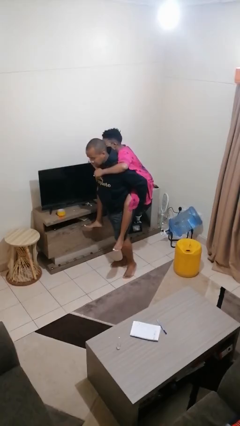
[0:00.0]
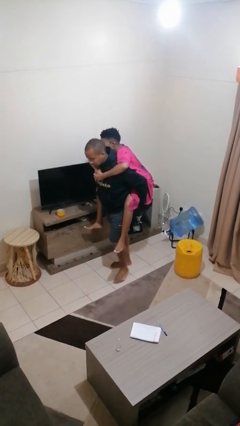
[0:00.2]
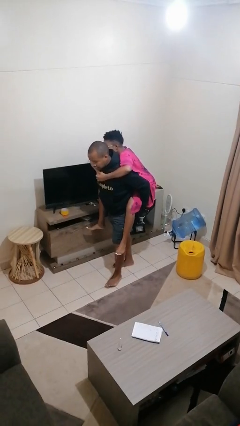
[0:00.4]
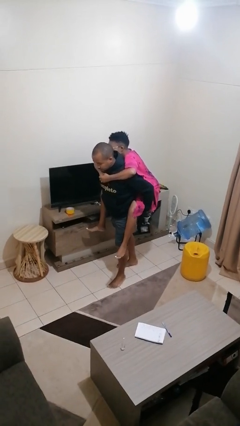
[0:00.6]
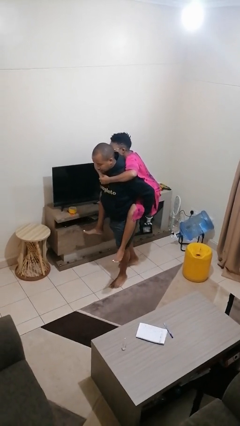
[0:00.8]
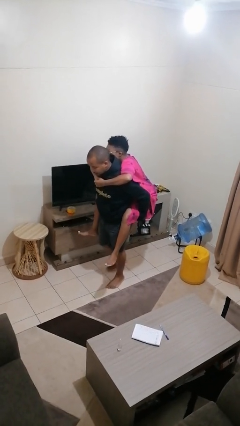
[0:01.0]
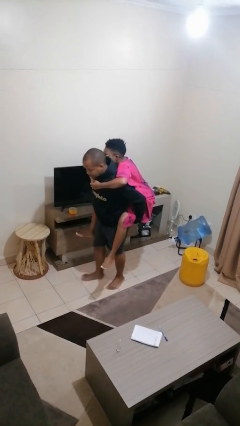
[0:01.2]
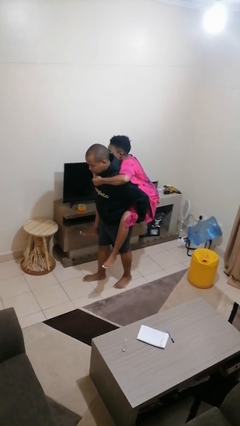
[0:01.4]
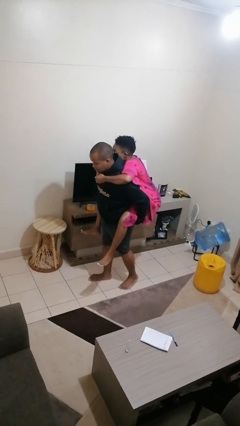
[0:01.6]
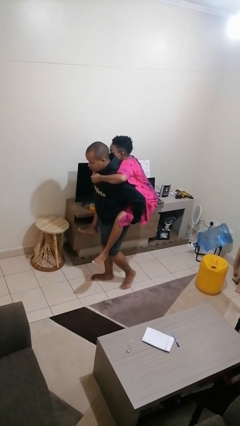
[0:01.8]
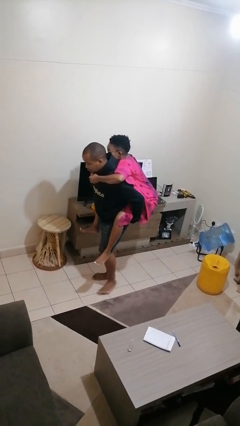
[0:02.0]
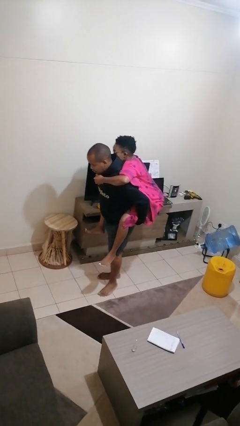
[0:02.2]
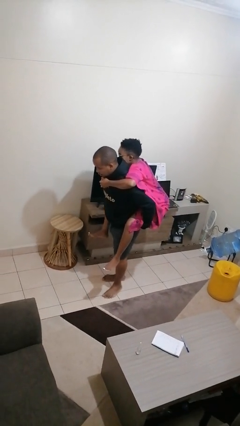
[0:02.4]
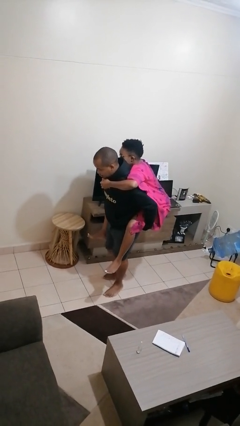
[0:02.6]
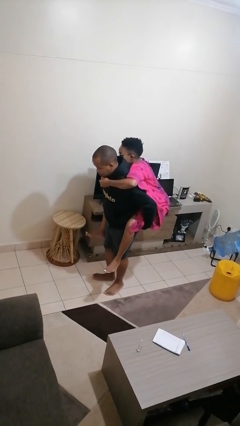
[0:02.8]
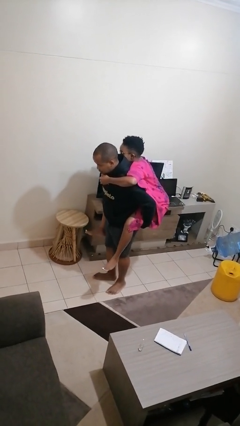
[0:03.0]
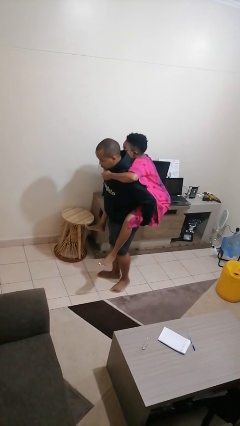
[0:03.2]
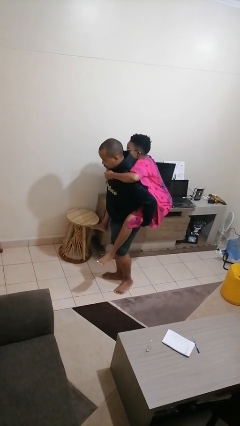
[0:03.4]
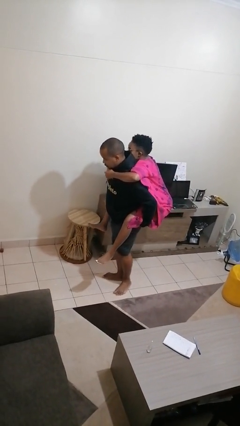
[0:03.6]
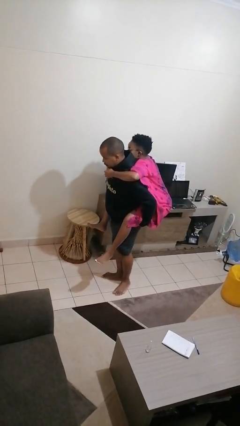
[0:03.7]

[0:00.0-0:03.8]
person carries person on back

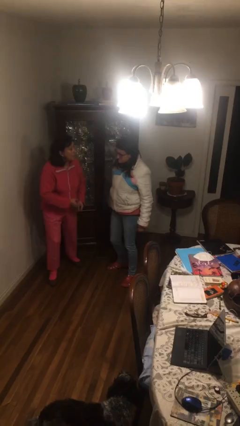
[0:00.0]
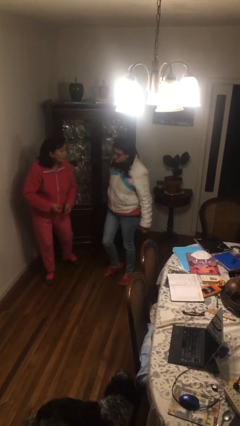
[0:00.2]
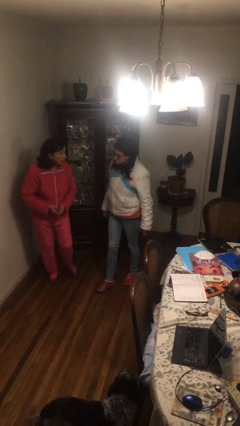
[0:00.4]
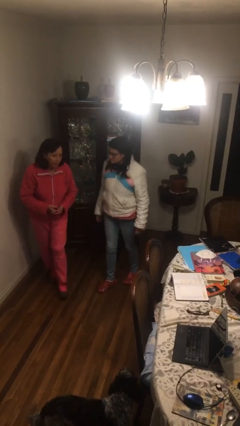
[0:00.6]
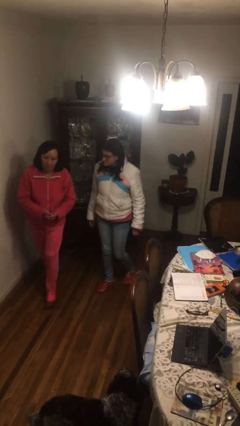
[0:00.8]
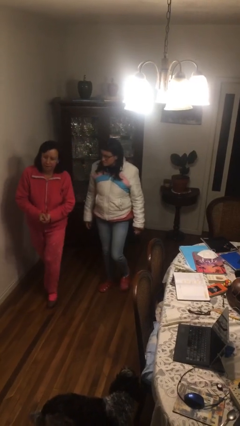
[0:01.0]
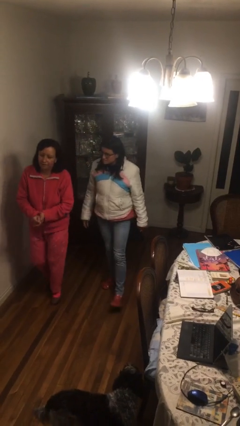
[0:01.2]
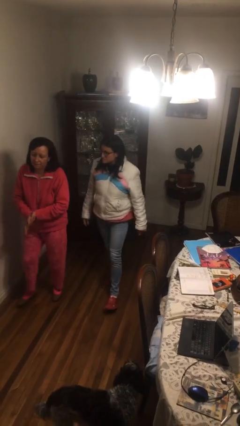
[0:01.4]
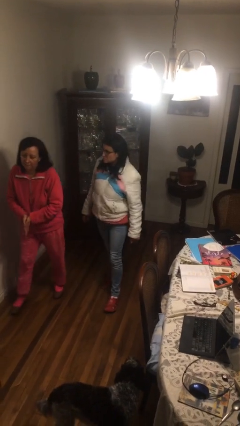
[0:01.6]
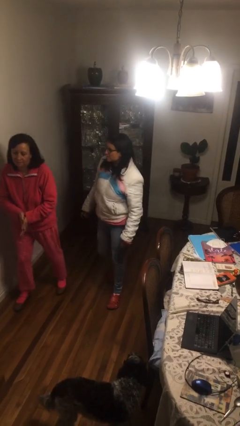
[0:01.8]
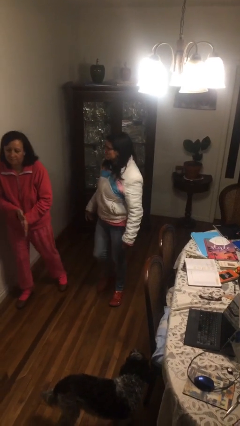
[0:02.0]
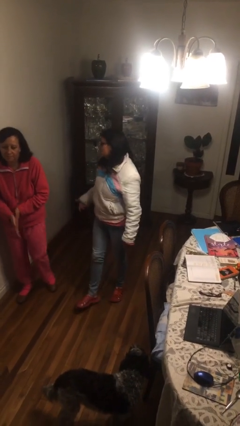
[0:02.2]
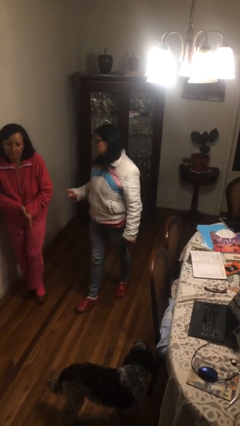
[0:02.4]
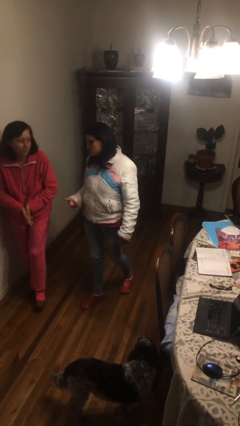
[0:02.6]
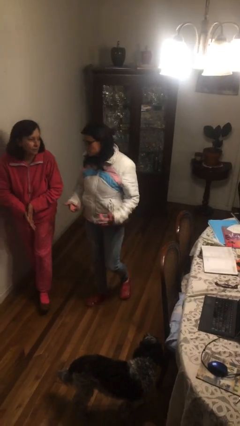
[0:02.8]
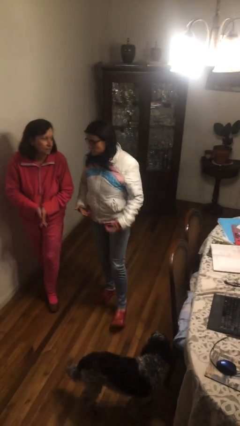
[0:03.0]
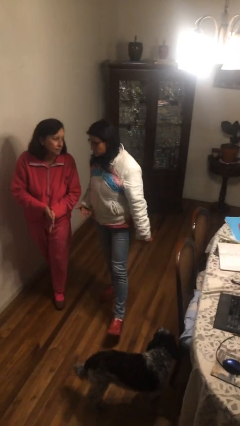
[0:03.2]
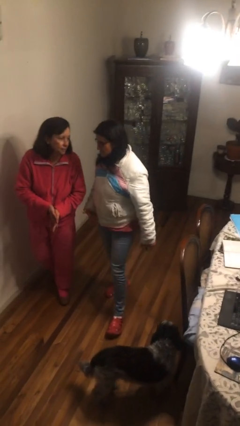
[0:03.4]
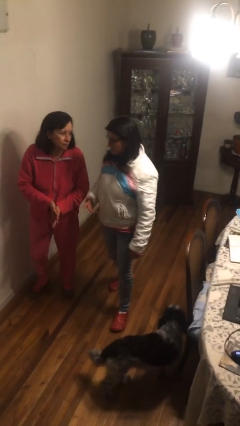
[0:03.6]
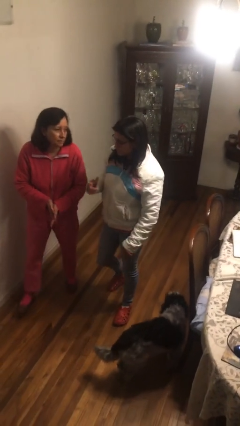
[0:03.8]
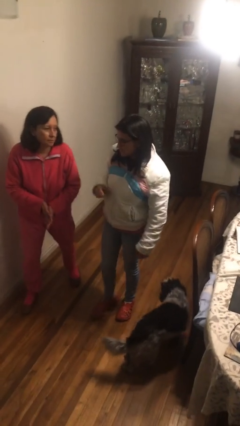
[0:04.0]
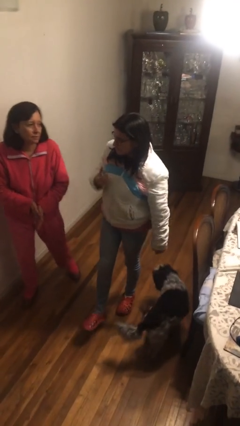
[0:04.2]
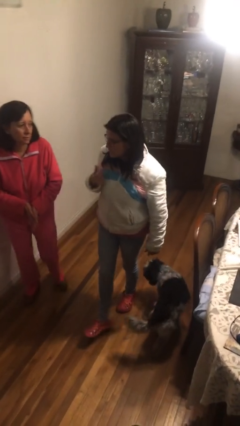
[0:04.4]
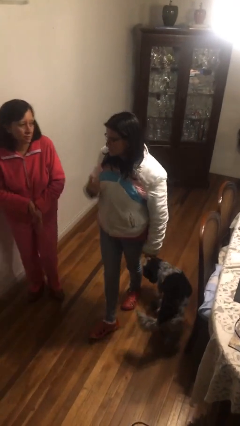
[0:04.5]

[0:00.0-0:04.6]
person talks to person

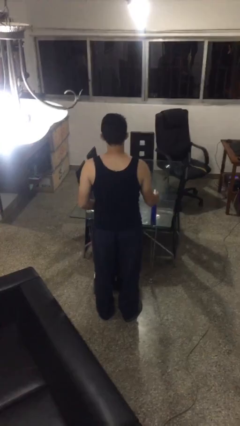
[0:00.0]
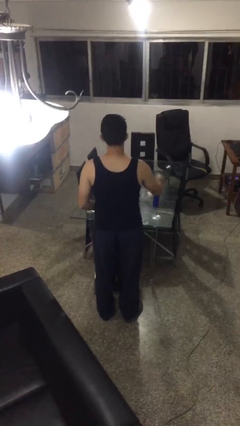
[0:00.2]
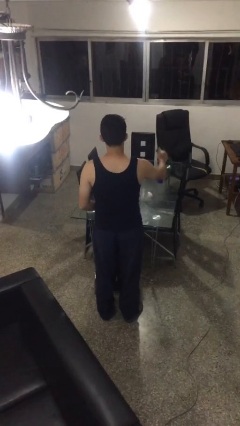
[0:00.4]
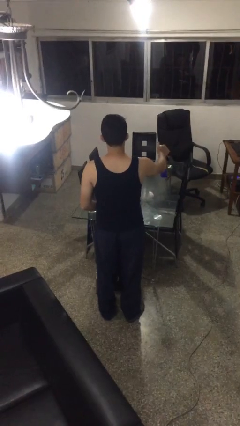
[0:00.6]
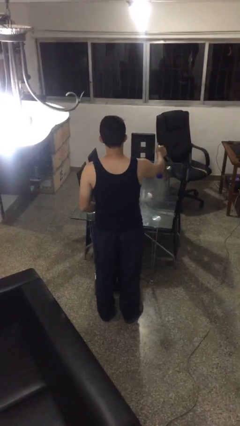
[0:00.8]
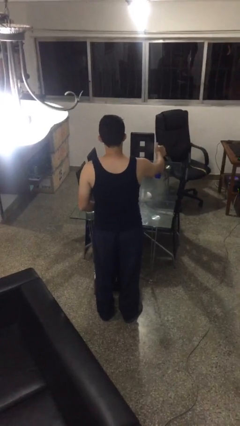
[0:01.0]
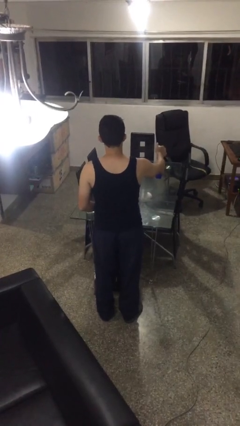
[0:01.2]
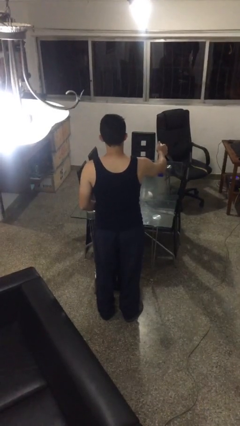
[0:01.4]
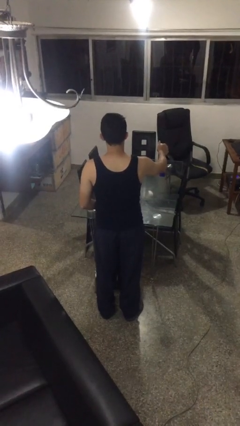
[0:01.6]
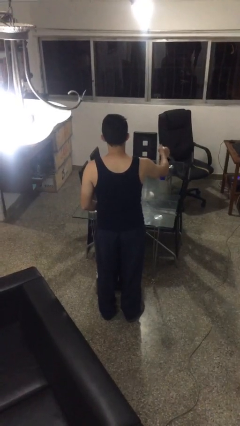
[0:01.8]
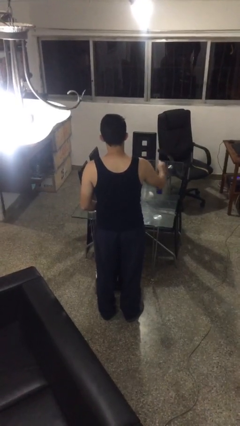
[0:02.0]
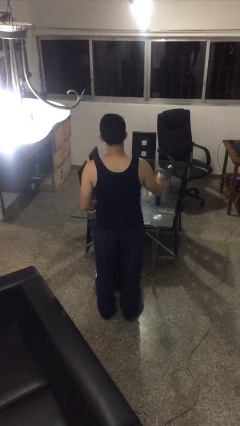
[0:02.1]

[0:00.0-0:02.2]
person sprays from bottle

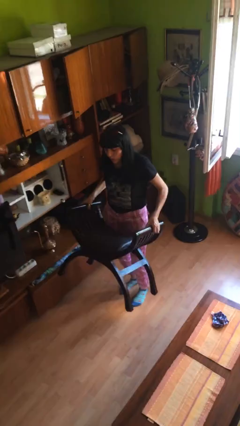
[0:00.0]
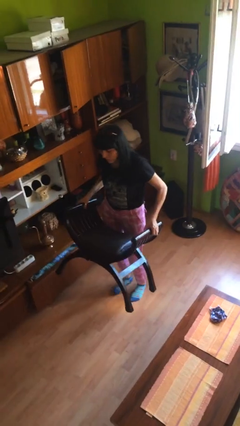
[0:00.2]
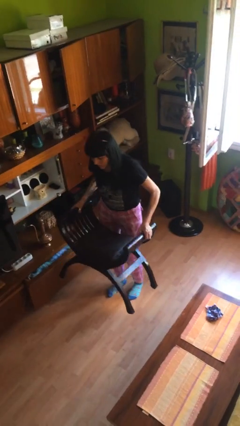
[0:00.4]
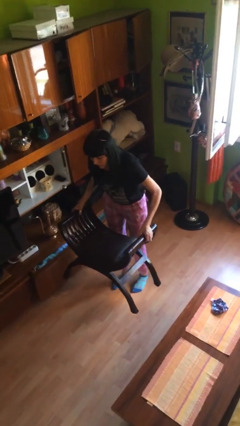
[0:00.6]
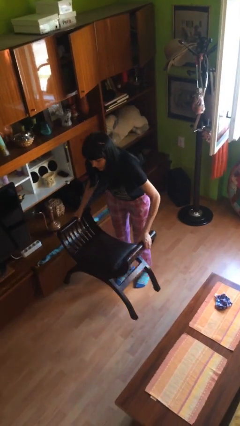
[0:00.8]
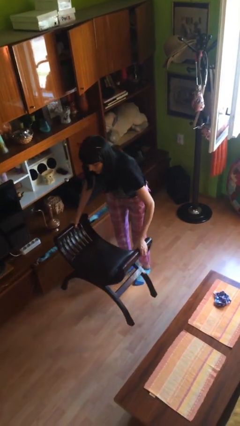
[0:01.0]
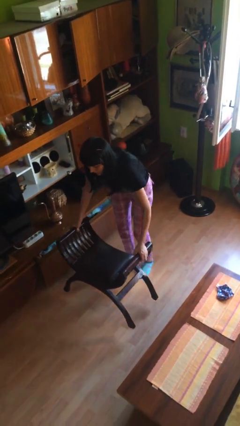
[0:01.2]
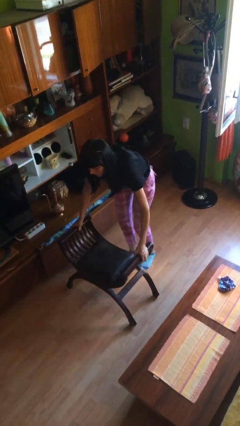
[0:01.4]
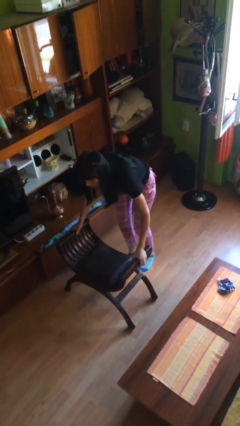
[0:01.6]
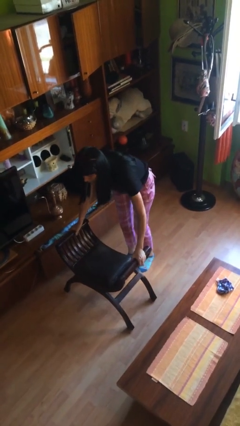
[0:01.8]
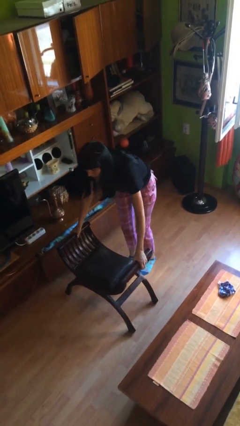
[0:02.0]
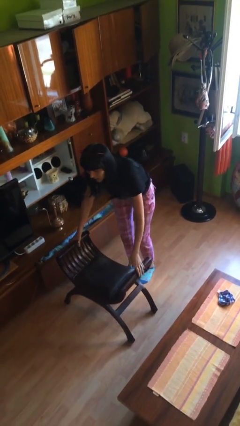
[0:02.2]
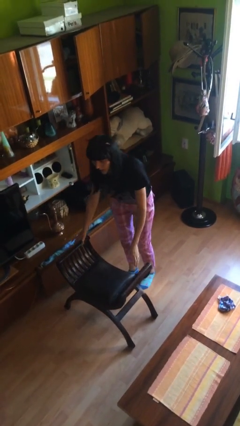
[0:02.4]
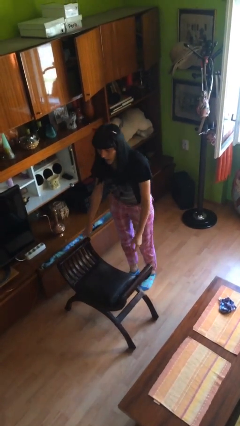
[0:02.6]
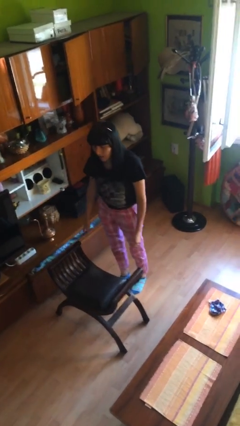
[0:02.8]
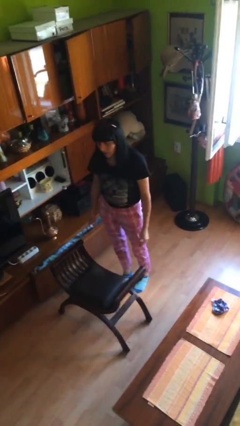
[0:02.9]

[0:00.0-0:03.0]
person puts down object on floor

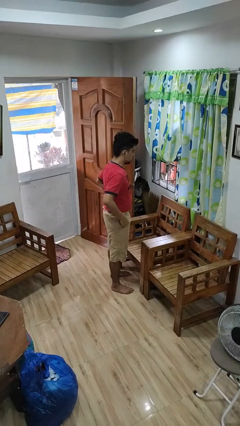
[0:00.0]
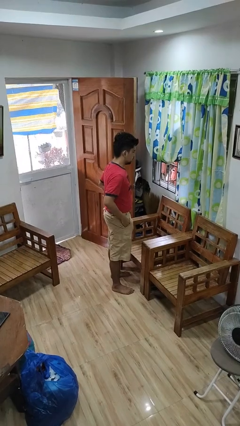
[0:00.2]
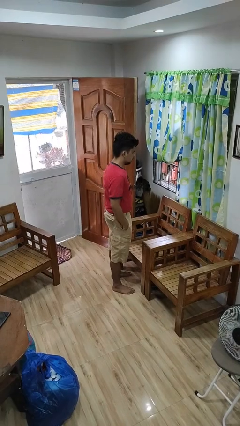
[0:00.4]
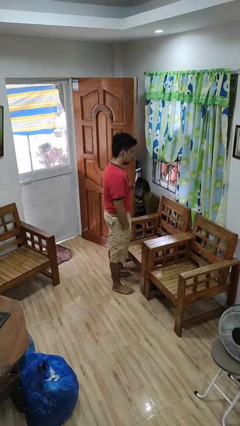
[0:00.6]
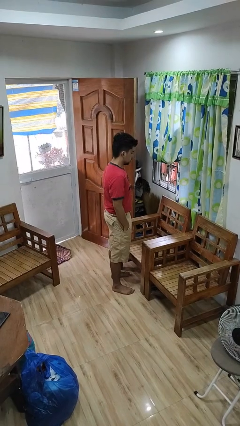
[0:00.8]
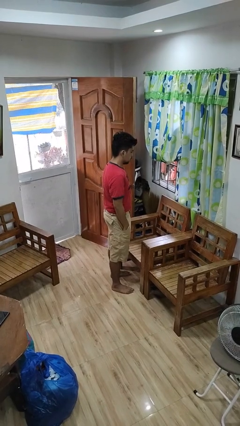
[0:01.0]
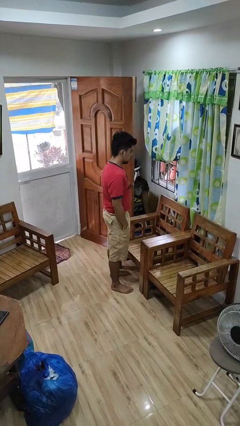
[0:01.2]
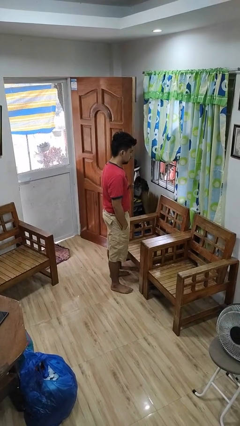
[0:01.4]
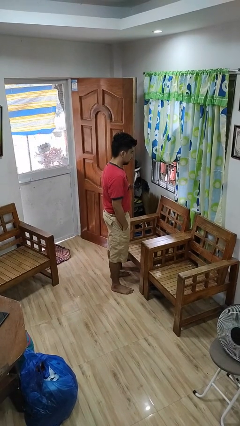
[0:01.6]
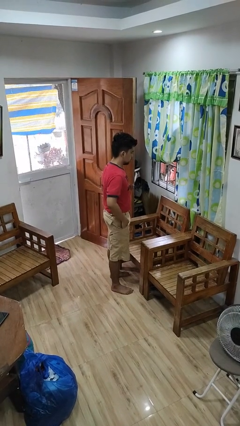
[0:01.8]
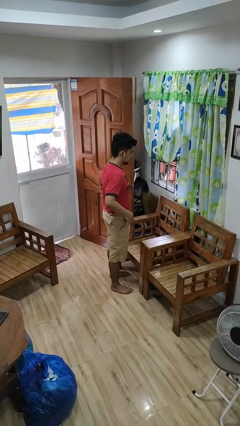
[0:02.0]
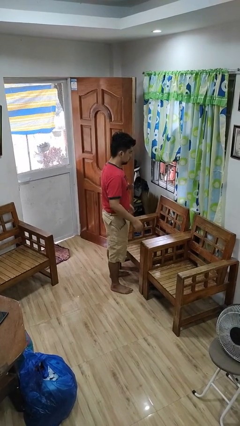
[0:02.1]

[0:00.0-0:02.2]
person puts hands in back pockets

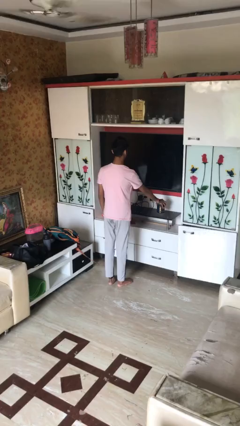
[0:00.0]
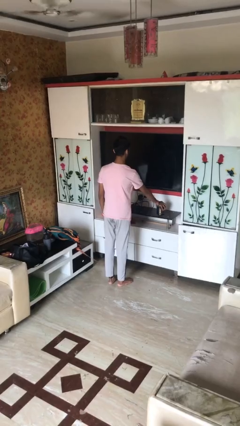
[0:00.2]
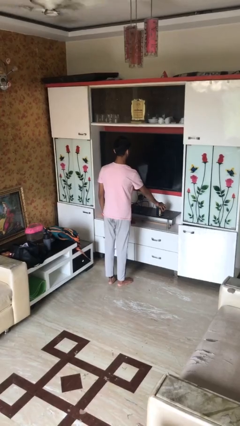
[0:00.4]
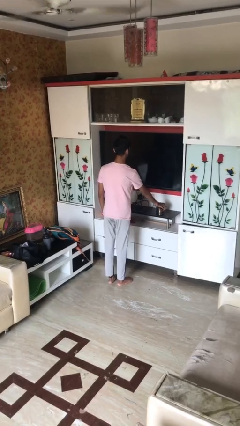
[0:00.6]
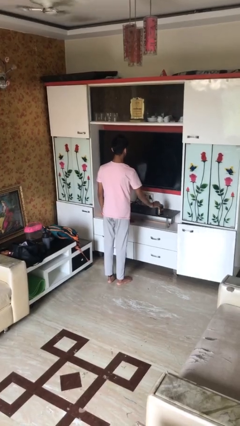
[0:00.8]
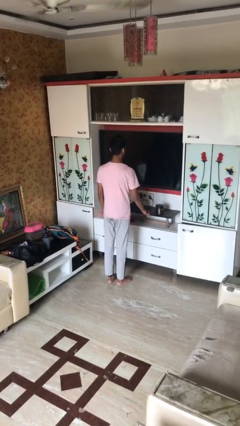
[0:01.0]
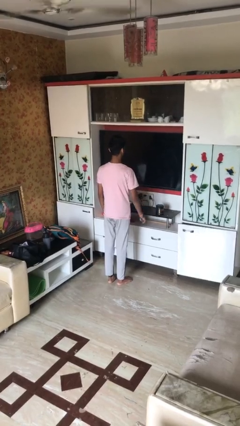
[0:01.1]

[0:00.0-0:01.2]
person puts down object on countertop
